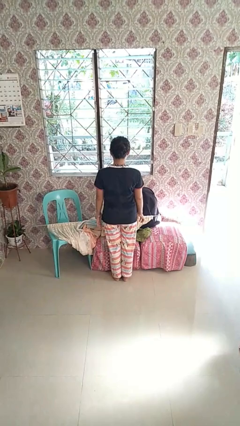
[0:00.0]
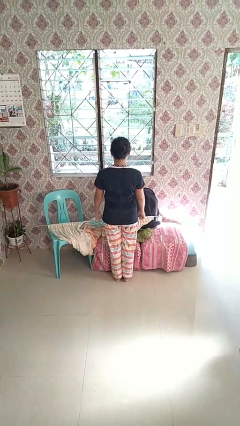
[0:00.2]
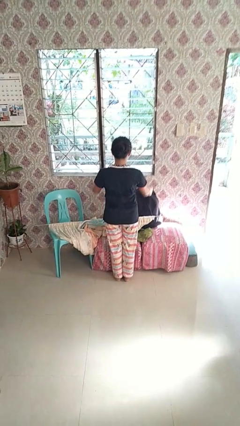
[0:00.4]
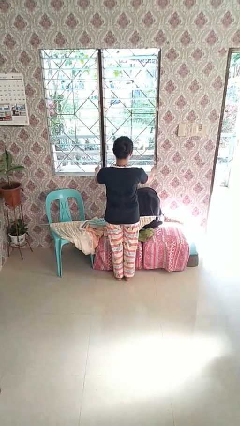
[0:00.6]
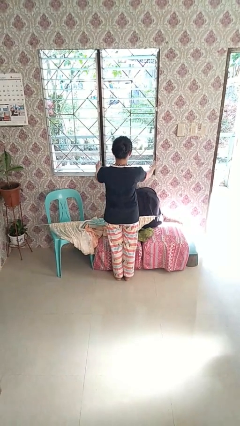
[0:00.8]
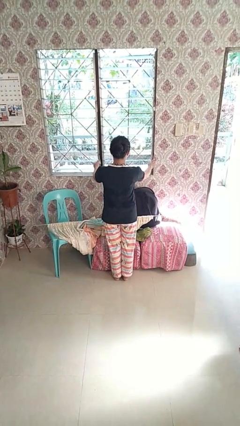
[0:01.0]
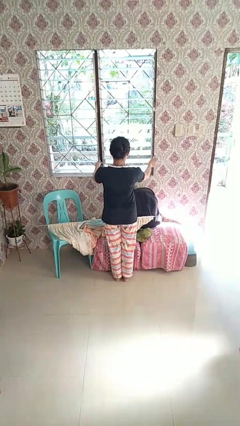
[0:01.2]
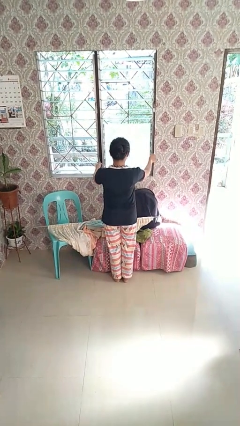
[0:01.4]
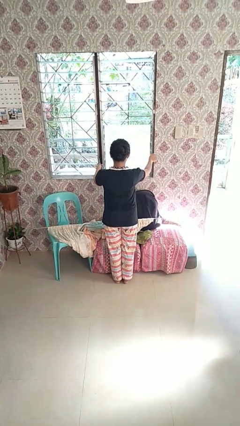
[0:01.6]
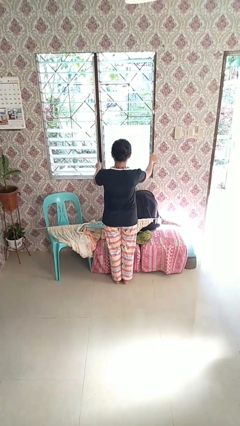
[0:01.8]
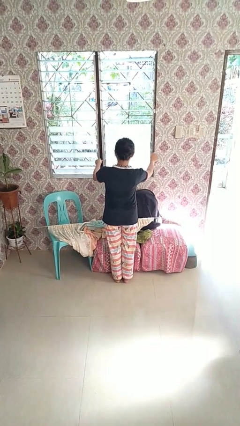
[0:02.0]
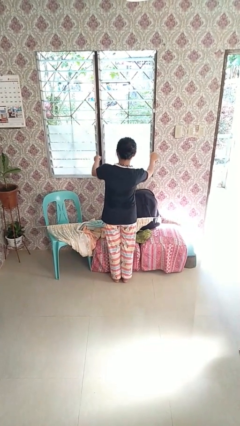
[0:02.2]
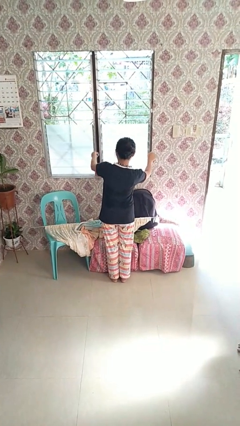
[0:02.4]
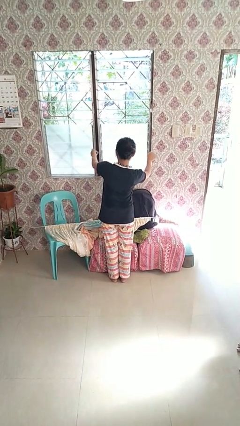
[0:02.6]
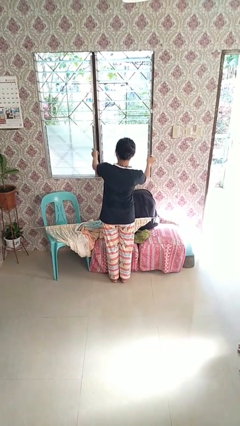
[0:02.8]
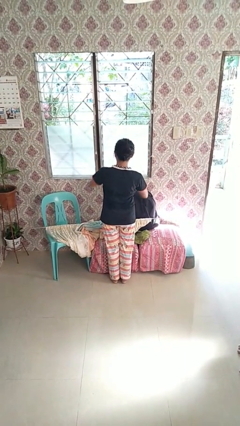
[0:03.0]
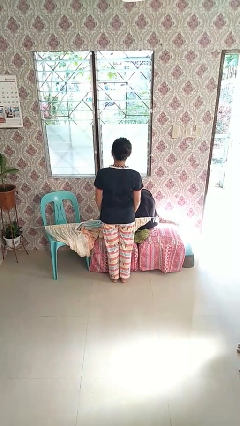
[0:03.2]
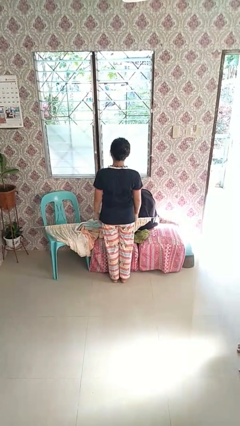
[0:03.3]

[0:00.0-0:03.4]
person closes home window

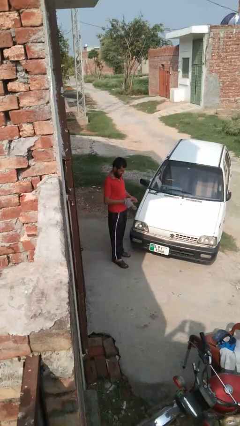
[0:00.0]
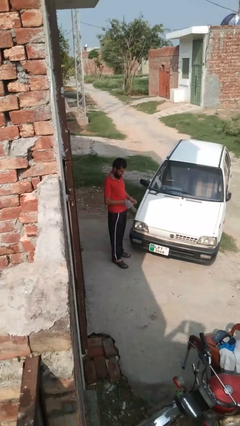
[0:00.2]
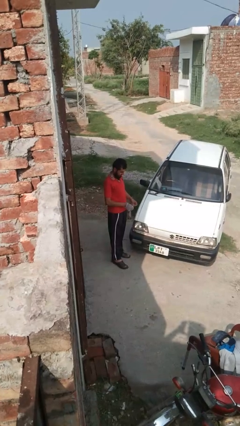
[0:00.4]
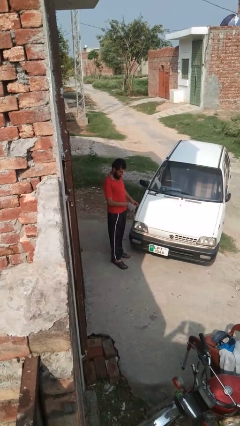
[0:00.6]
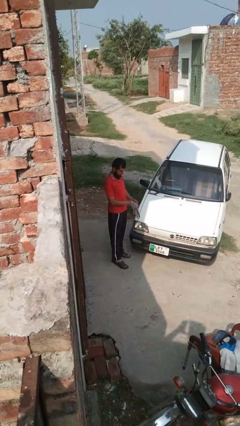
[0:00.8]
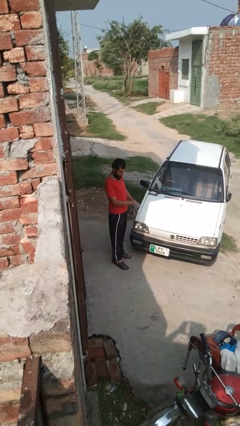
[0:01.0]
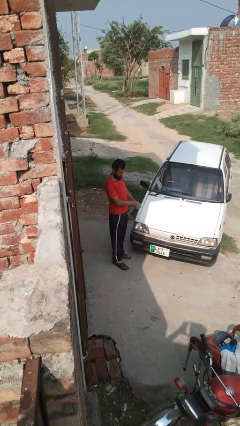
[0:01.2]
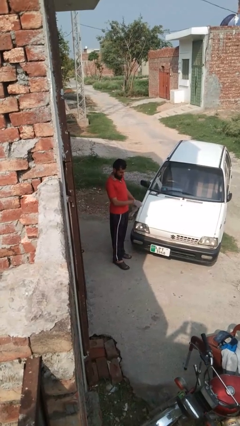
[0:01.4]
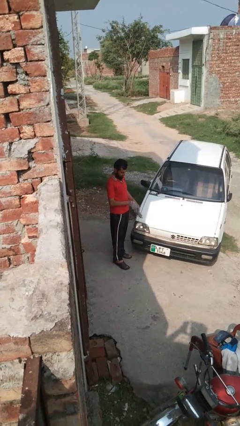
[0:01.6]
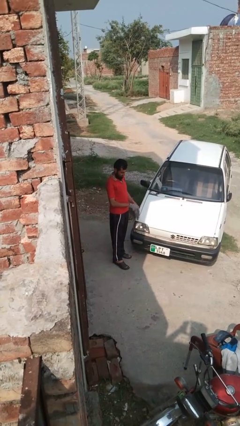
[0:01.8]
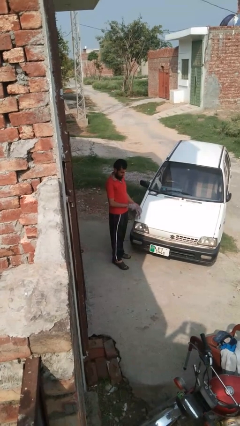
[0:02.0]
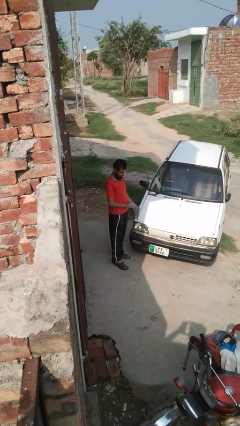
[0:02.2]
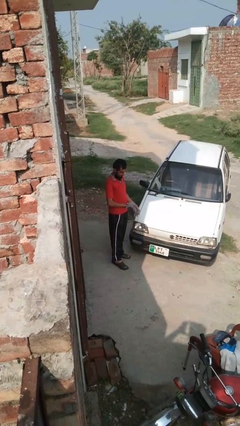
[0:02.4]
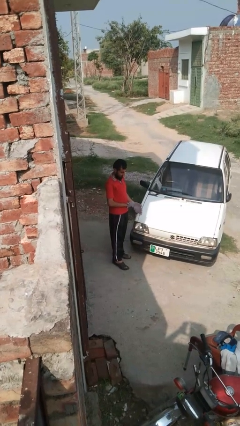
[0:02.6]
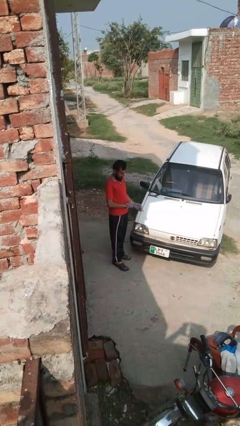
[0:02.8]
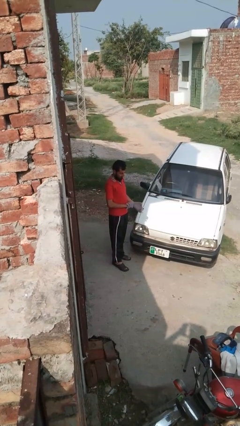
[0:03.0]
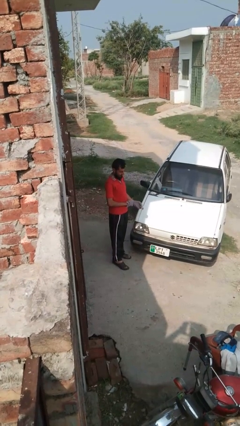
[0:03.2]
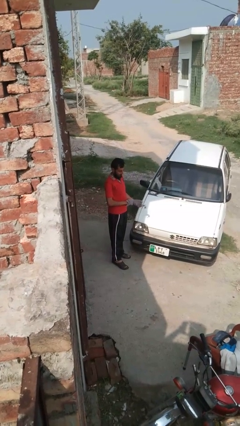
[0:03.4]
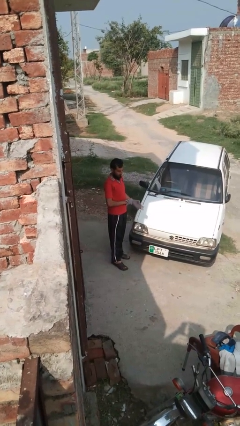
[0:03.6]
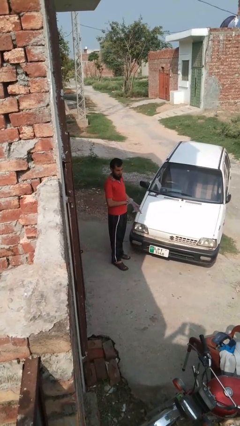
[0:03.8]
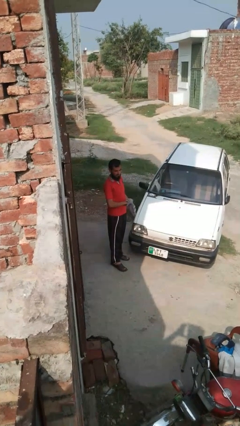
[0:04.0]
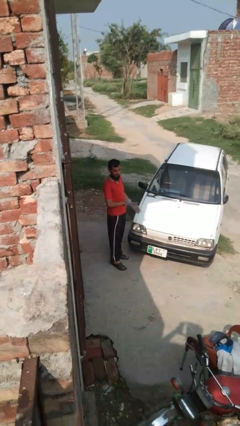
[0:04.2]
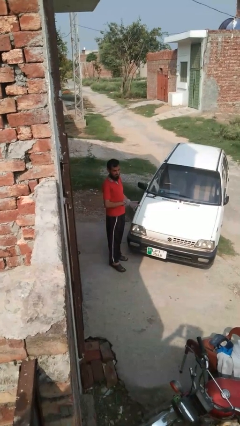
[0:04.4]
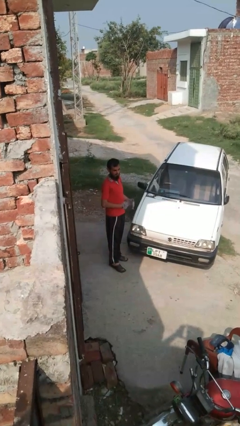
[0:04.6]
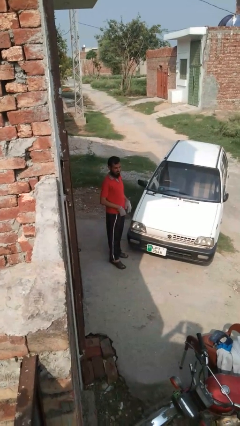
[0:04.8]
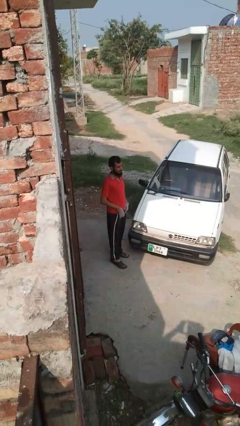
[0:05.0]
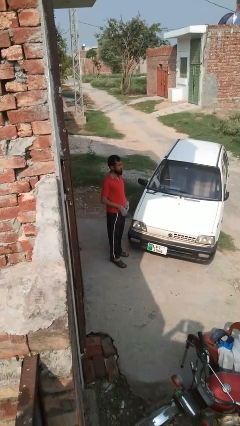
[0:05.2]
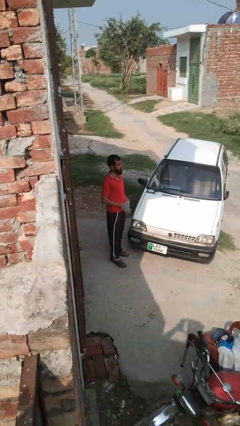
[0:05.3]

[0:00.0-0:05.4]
person puts on gloves

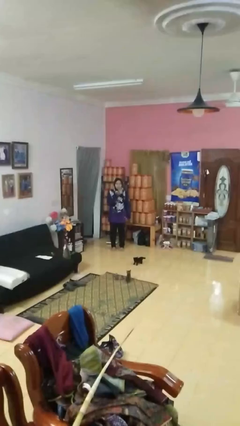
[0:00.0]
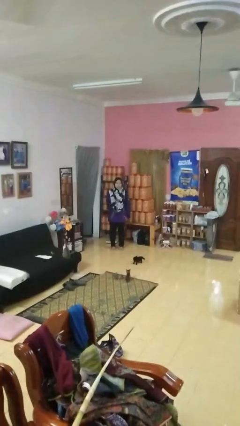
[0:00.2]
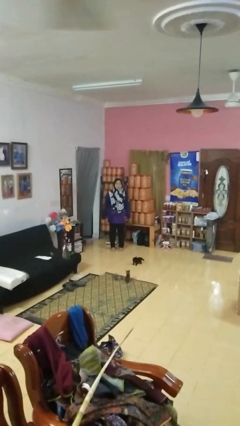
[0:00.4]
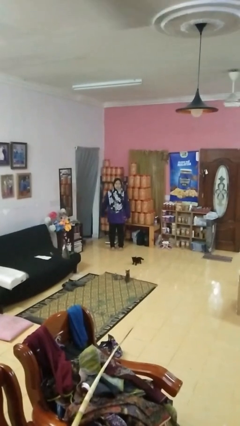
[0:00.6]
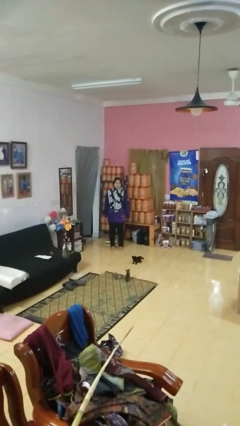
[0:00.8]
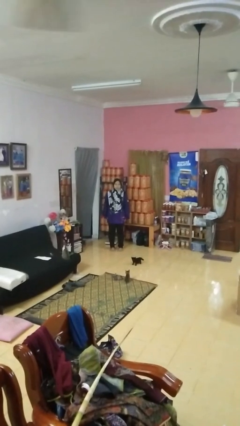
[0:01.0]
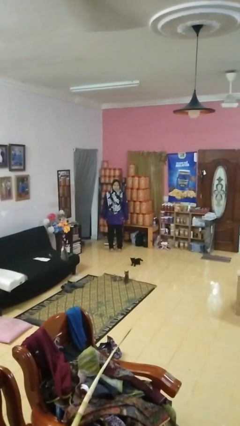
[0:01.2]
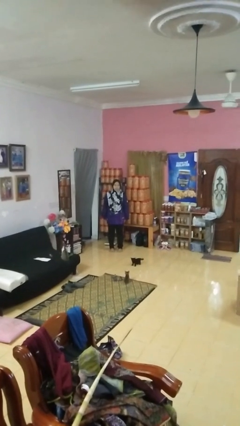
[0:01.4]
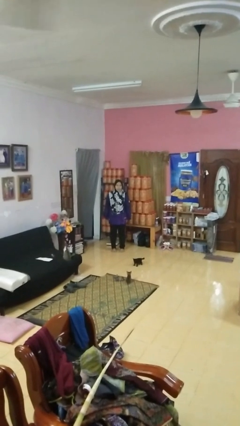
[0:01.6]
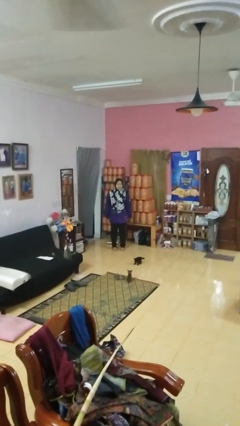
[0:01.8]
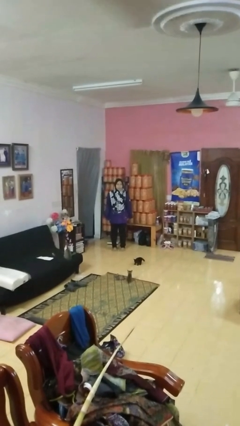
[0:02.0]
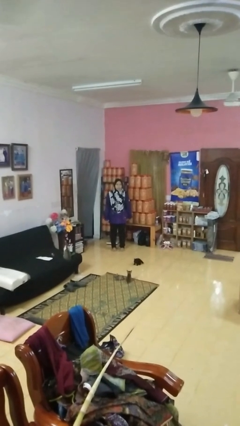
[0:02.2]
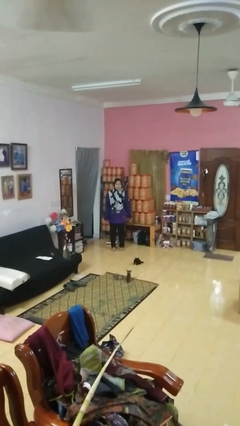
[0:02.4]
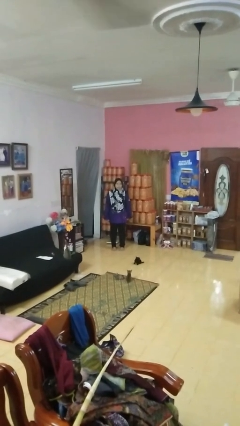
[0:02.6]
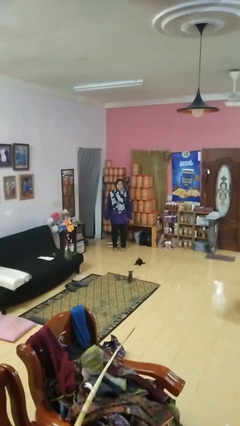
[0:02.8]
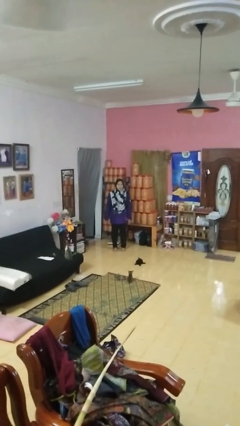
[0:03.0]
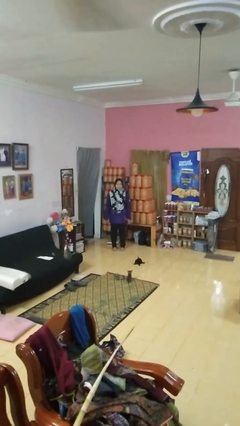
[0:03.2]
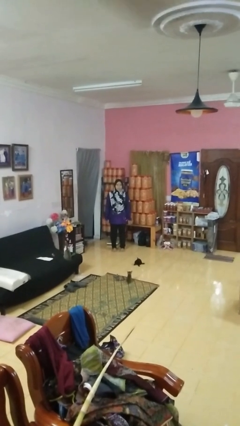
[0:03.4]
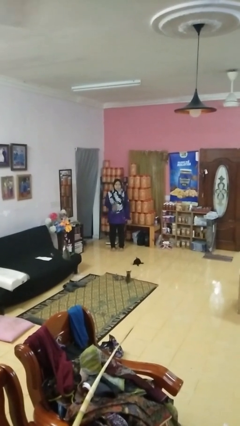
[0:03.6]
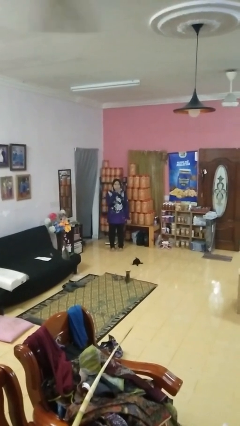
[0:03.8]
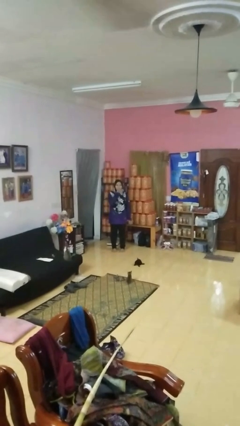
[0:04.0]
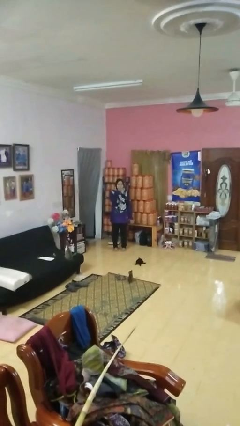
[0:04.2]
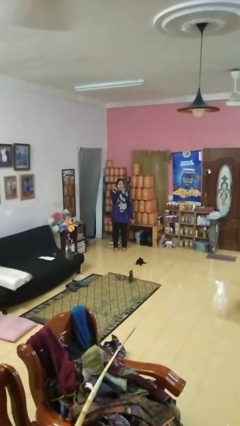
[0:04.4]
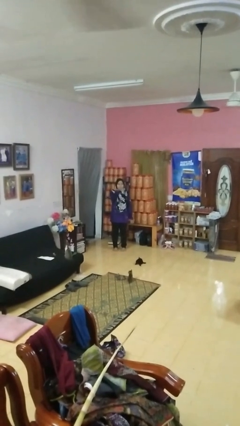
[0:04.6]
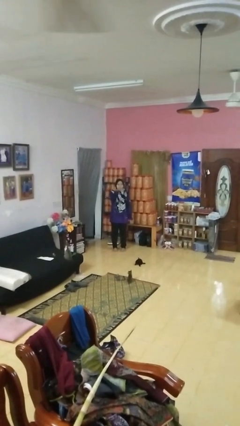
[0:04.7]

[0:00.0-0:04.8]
person gestures blow kiss

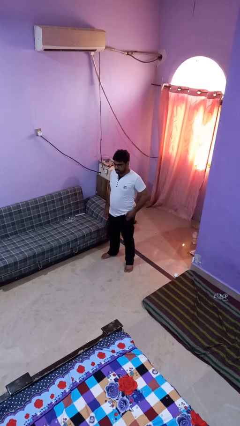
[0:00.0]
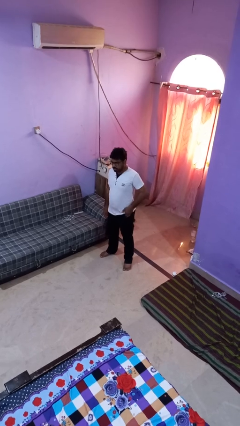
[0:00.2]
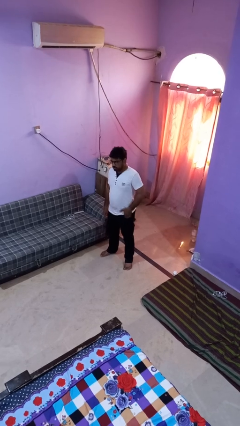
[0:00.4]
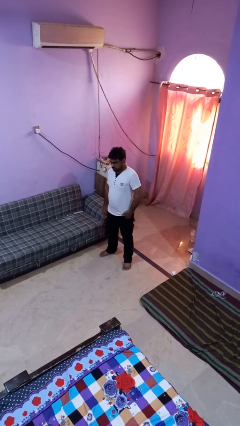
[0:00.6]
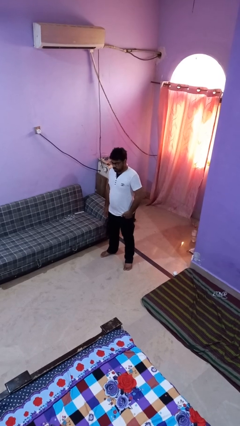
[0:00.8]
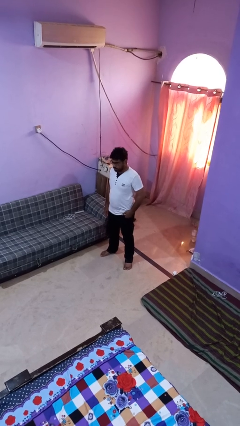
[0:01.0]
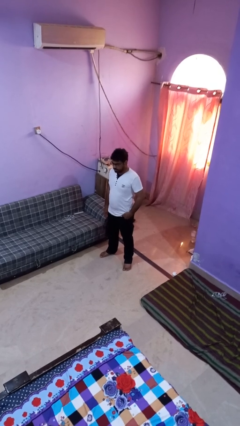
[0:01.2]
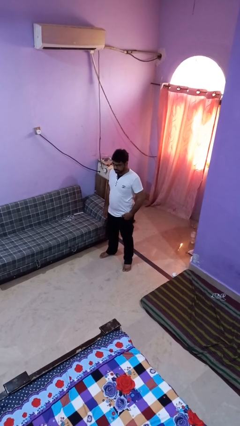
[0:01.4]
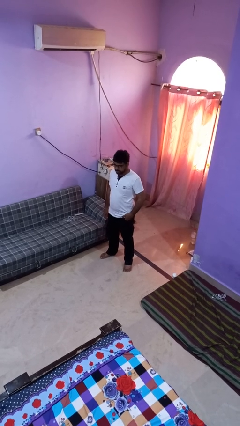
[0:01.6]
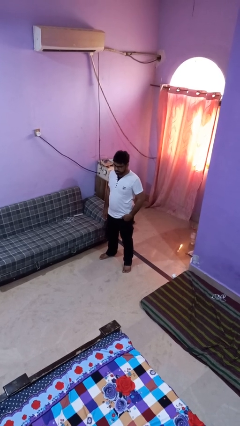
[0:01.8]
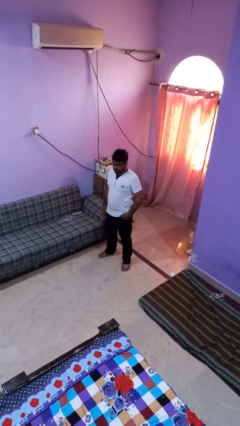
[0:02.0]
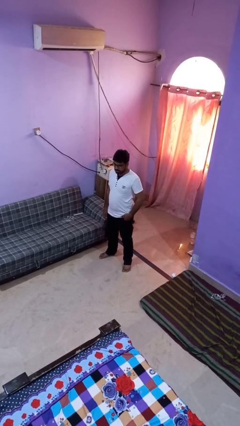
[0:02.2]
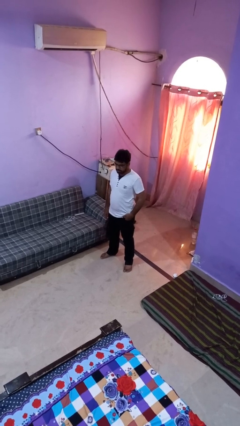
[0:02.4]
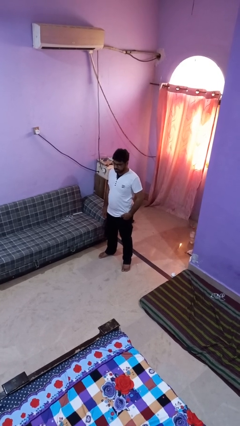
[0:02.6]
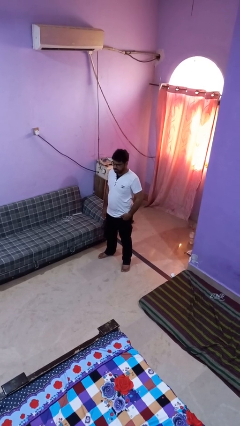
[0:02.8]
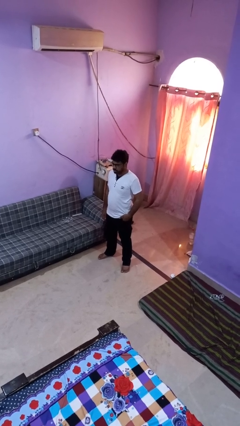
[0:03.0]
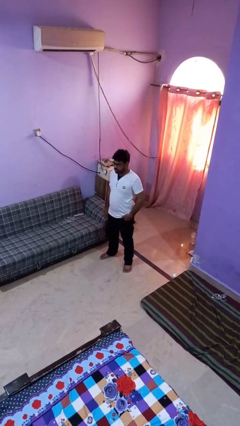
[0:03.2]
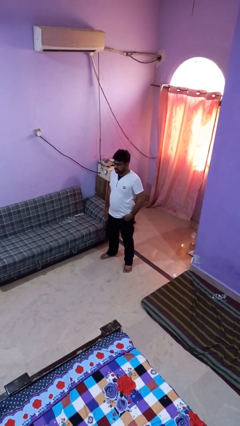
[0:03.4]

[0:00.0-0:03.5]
person puts hands in back pockets

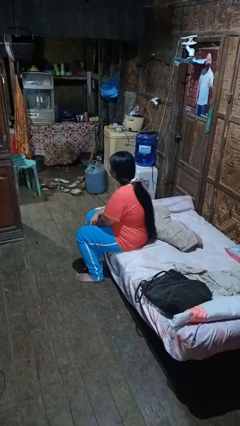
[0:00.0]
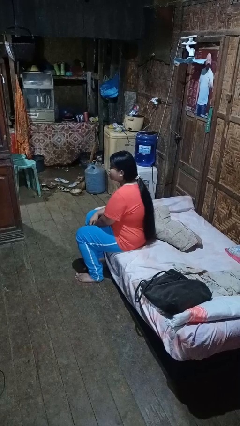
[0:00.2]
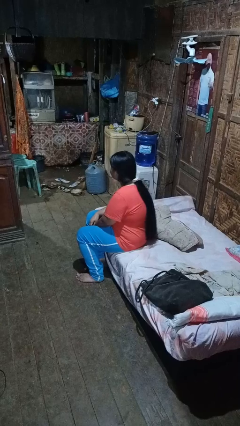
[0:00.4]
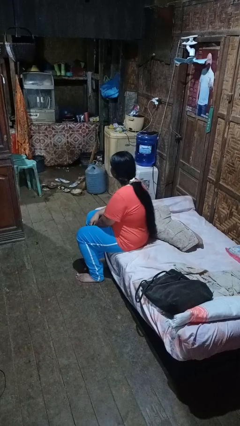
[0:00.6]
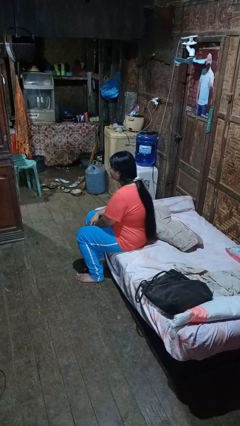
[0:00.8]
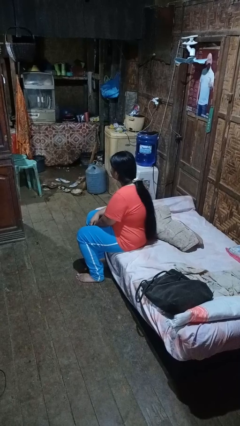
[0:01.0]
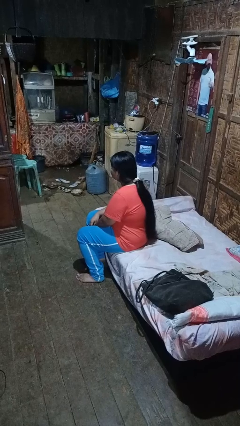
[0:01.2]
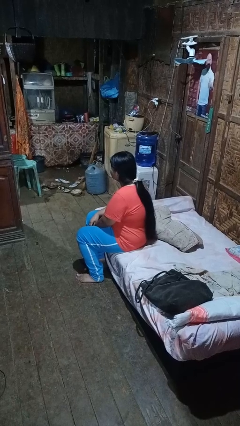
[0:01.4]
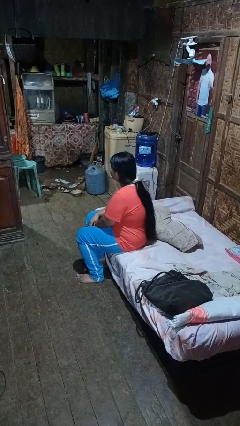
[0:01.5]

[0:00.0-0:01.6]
person shakes head
